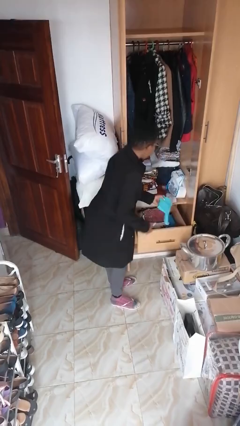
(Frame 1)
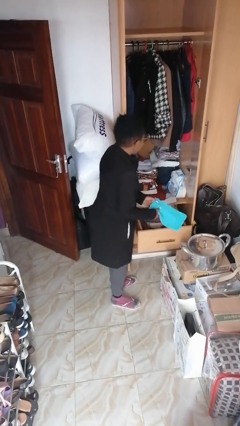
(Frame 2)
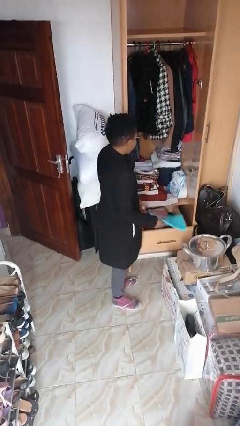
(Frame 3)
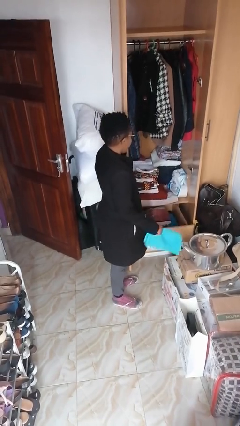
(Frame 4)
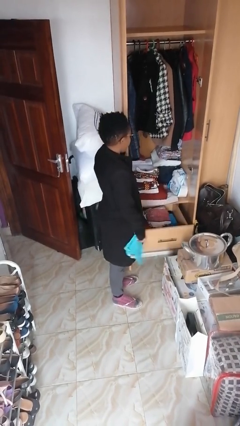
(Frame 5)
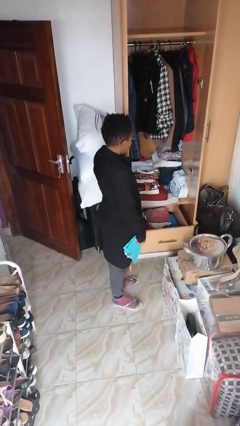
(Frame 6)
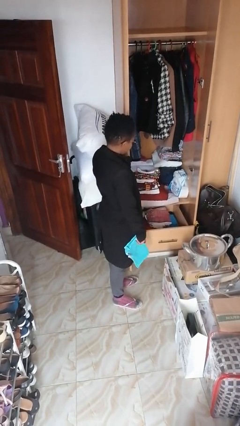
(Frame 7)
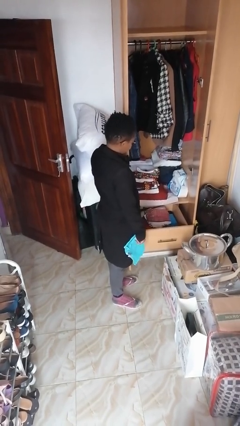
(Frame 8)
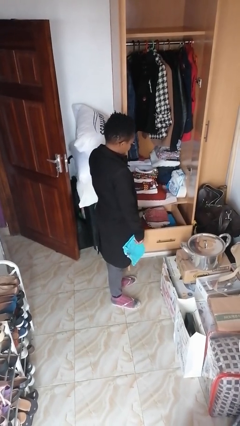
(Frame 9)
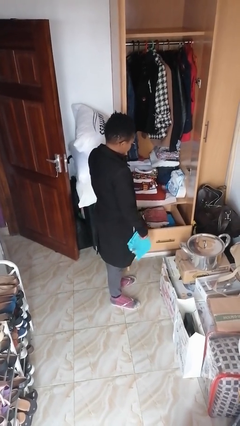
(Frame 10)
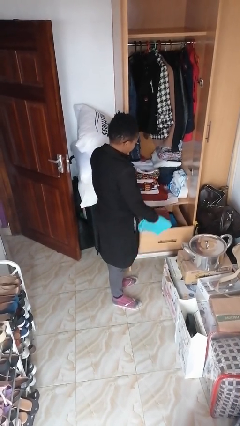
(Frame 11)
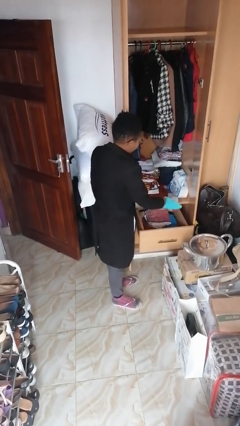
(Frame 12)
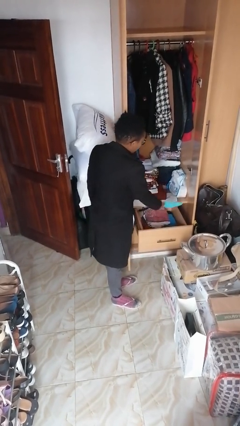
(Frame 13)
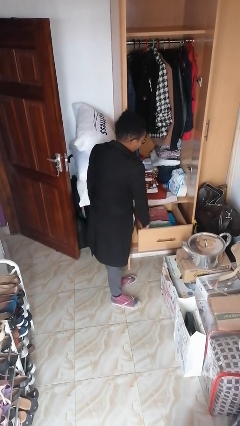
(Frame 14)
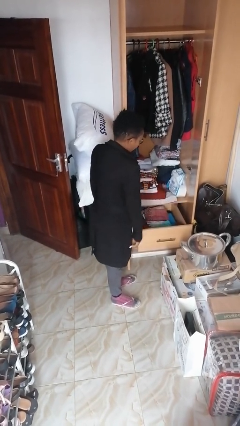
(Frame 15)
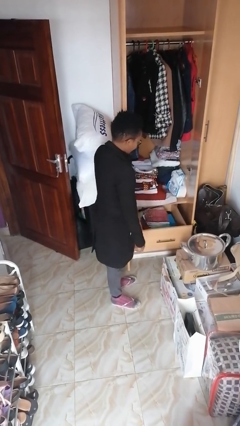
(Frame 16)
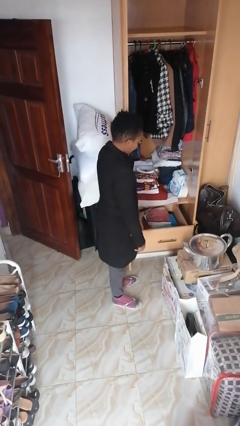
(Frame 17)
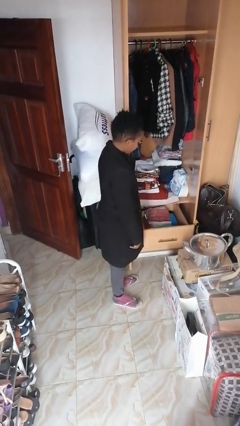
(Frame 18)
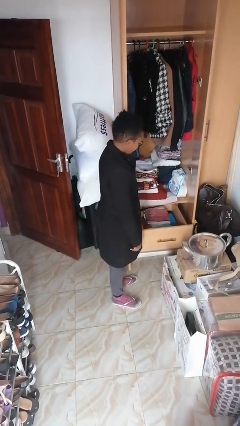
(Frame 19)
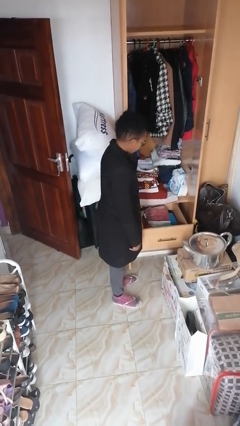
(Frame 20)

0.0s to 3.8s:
person pets cat

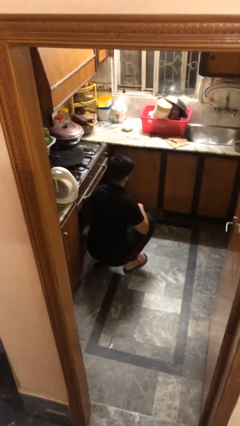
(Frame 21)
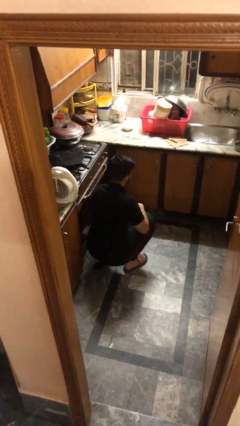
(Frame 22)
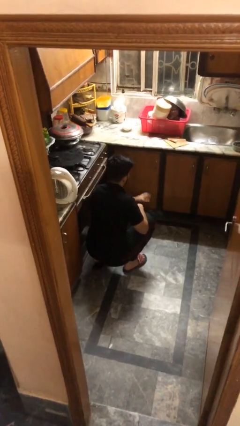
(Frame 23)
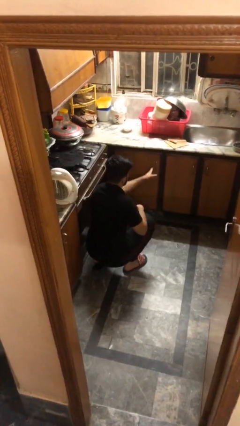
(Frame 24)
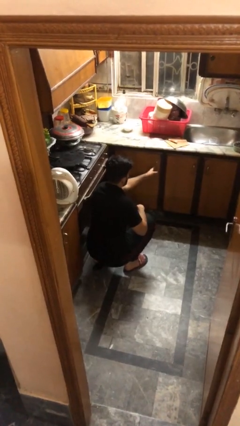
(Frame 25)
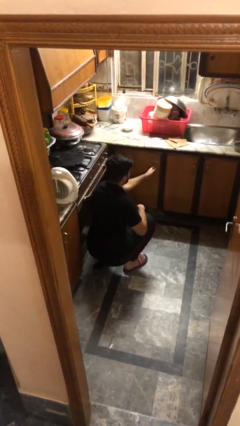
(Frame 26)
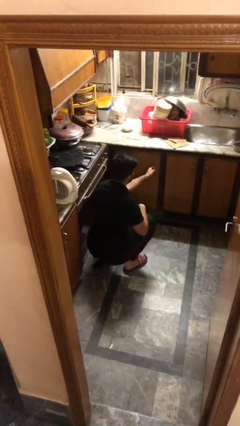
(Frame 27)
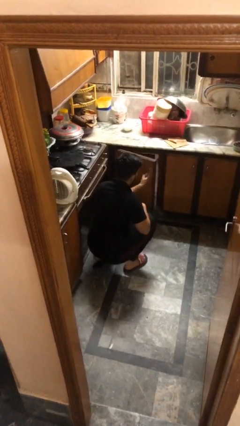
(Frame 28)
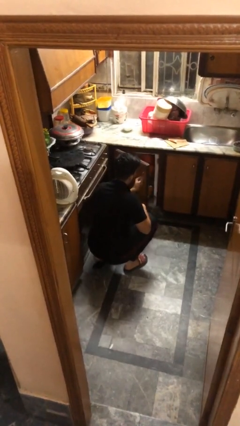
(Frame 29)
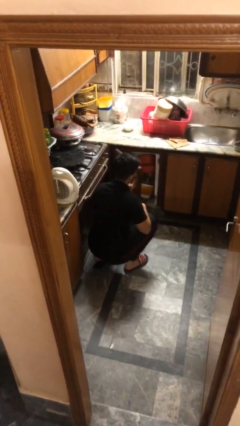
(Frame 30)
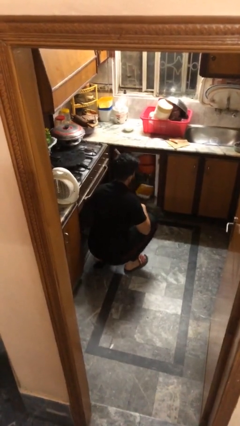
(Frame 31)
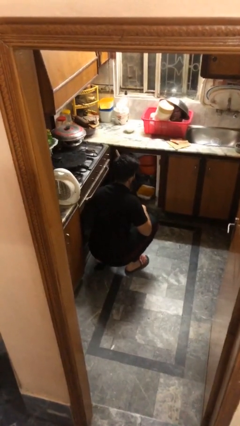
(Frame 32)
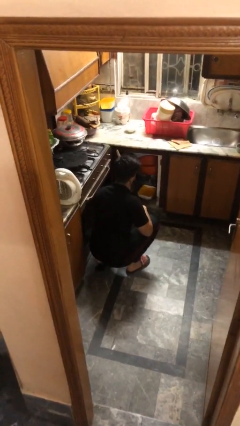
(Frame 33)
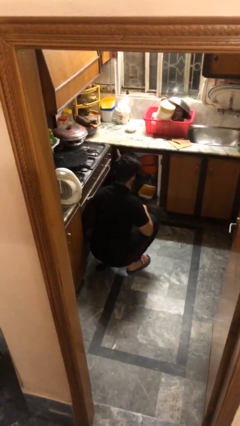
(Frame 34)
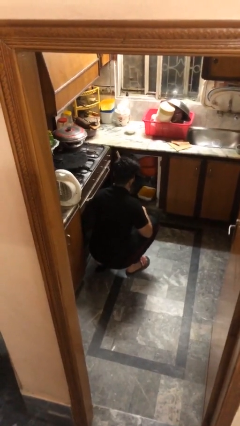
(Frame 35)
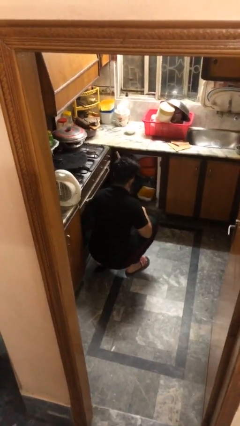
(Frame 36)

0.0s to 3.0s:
person opens kitchen drawer

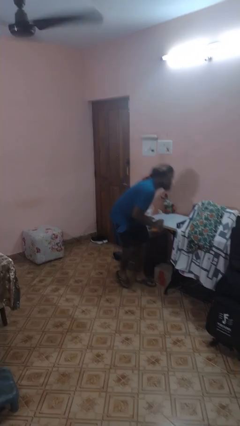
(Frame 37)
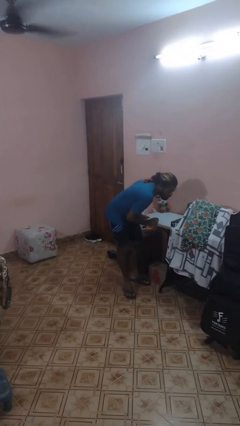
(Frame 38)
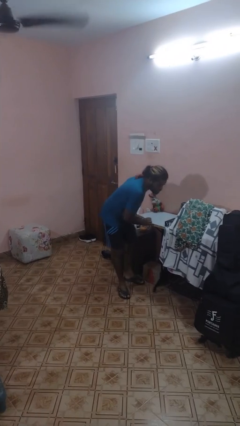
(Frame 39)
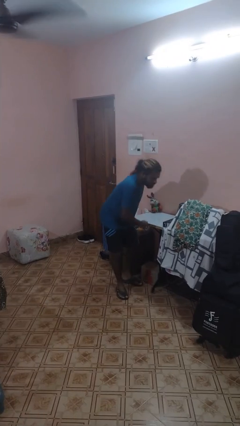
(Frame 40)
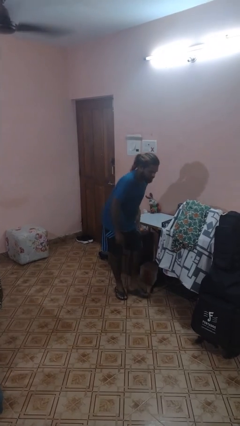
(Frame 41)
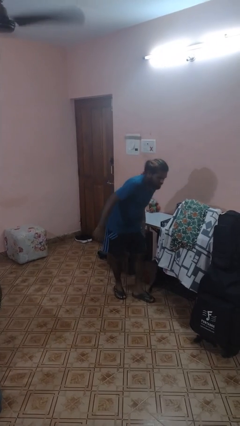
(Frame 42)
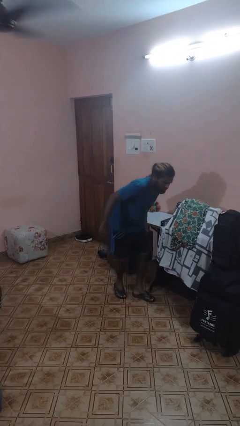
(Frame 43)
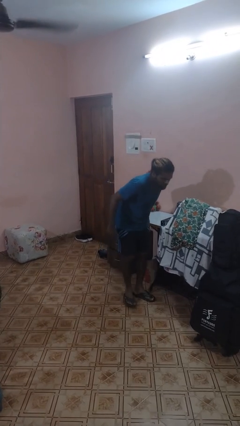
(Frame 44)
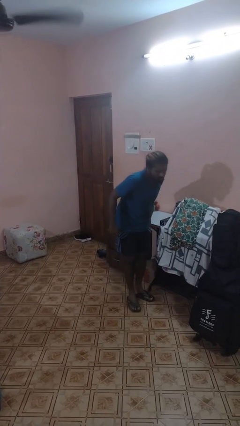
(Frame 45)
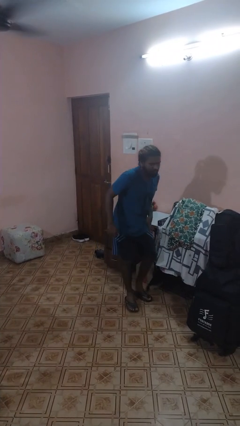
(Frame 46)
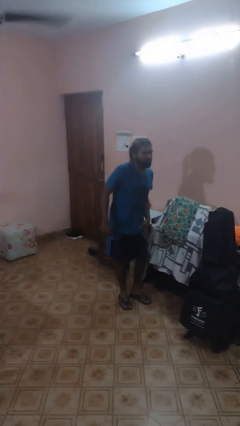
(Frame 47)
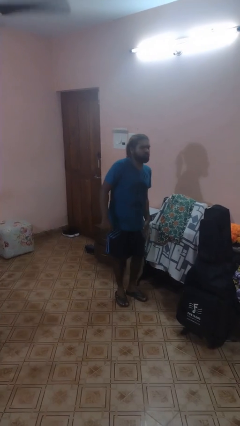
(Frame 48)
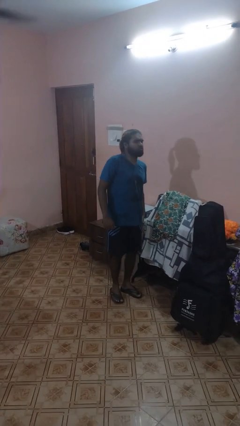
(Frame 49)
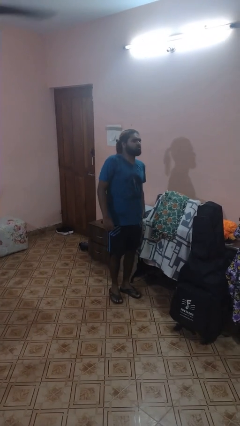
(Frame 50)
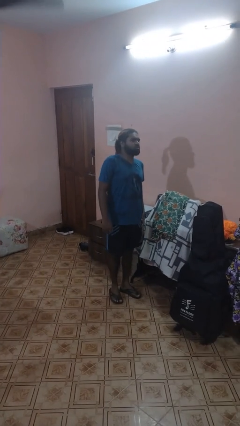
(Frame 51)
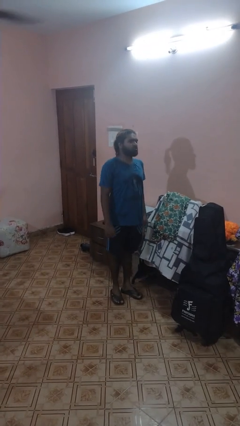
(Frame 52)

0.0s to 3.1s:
person bumps into table

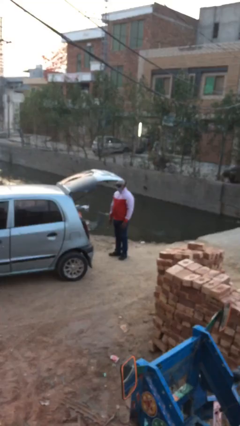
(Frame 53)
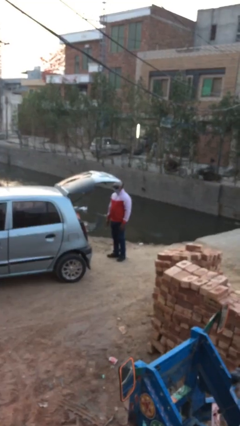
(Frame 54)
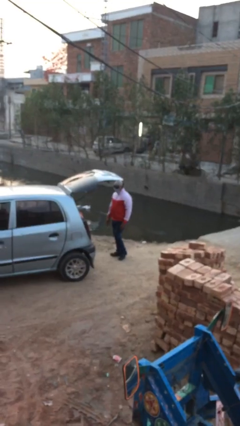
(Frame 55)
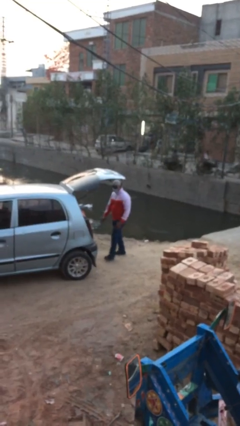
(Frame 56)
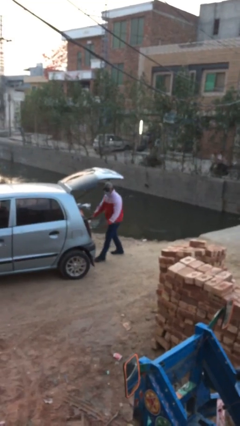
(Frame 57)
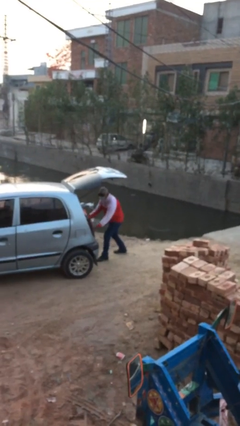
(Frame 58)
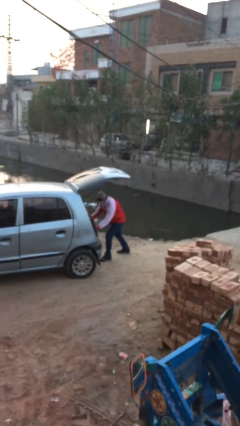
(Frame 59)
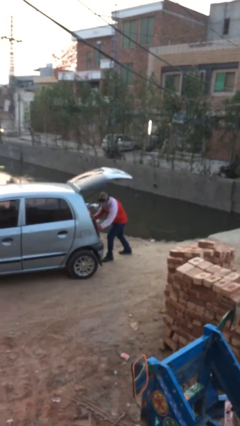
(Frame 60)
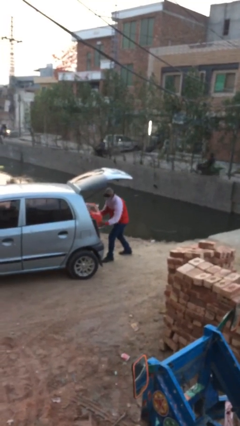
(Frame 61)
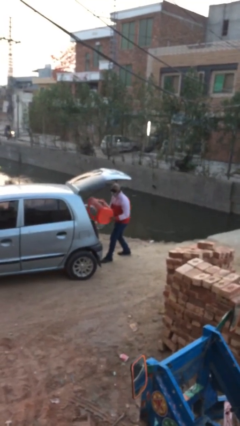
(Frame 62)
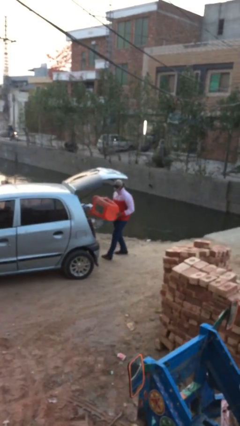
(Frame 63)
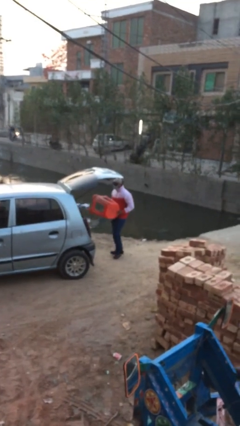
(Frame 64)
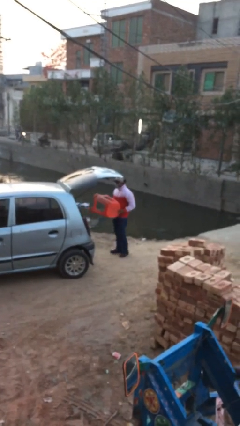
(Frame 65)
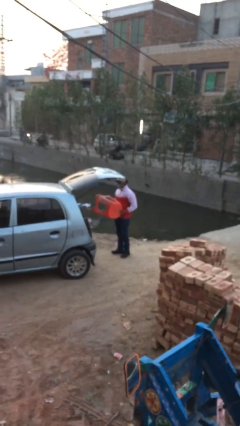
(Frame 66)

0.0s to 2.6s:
person unloads car

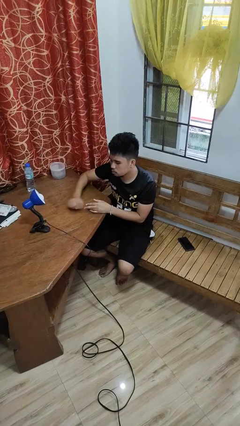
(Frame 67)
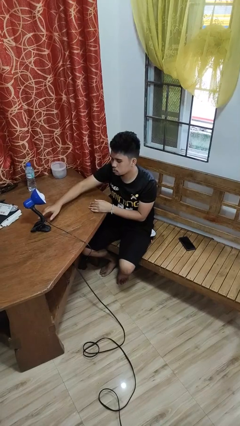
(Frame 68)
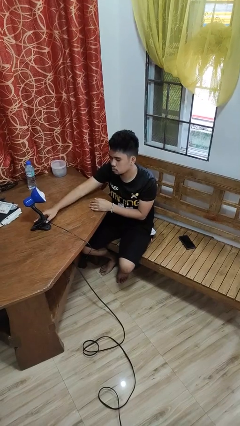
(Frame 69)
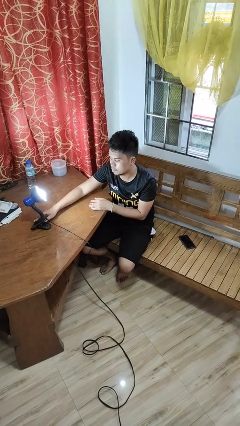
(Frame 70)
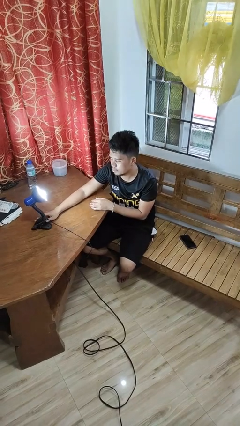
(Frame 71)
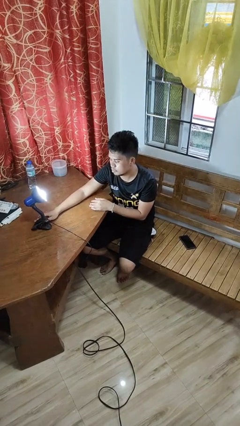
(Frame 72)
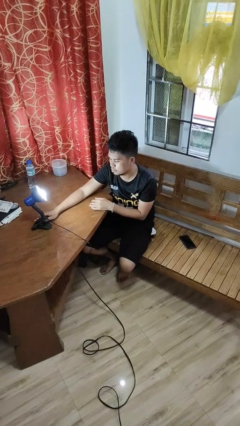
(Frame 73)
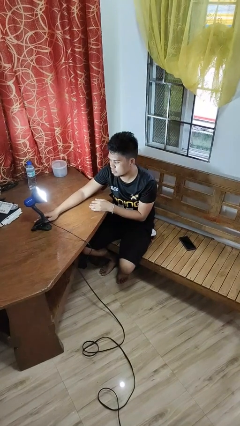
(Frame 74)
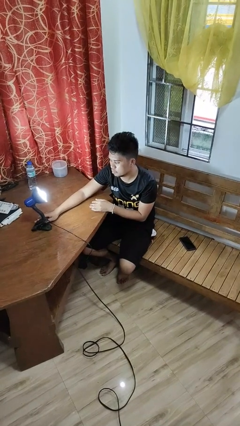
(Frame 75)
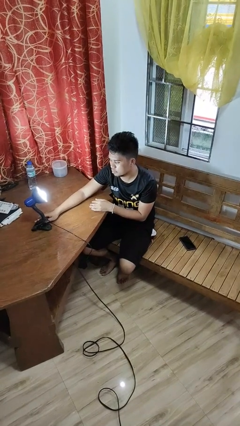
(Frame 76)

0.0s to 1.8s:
person turns on lamp

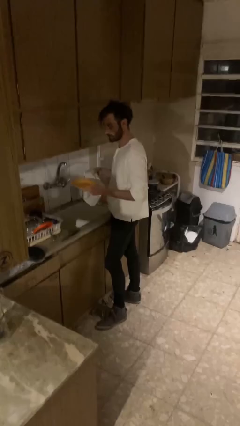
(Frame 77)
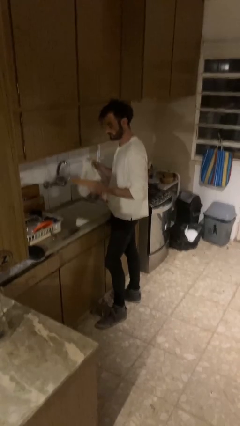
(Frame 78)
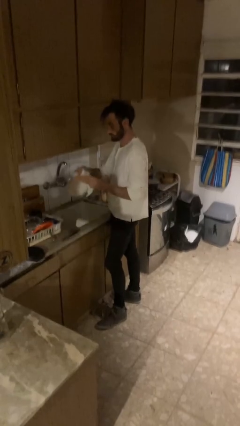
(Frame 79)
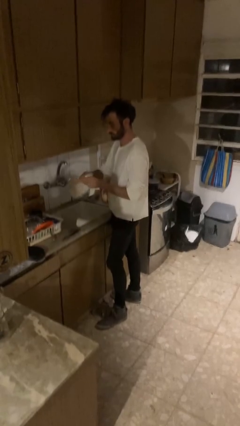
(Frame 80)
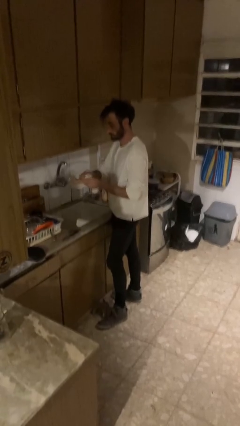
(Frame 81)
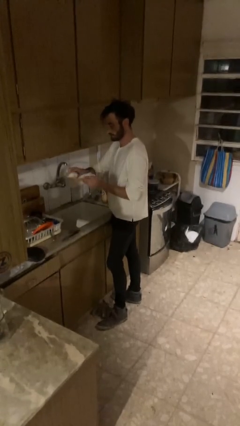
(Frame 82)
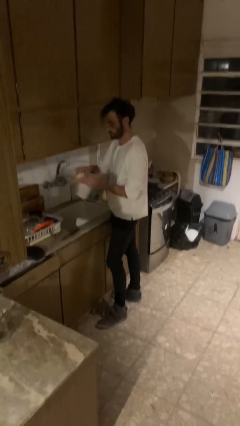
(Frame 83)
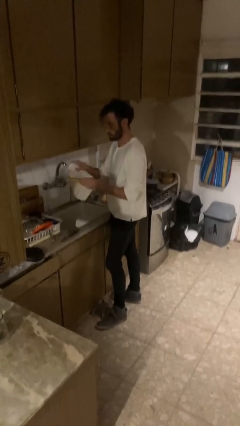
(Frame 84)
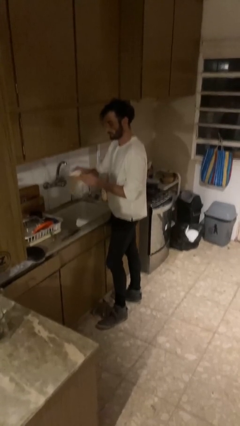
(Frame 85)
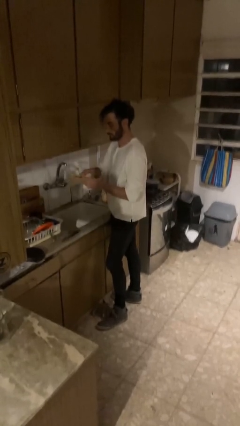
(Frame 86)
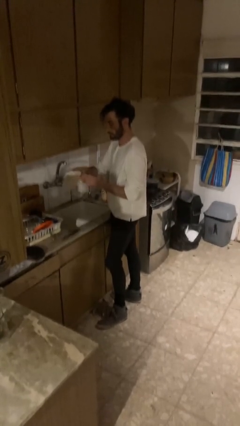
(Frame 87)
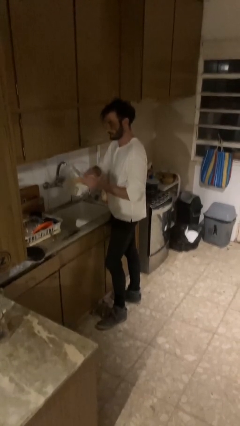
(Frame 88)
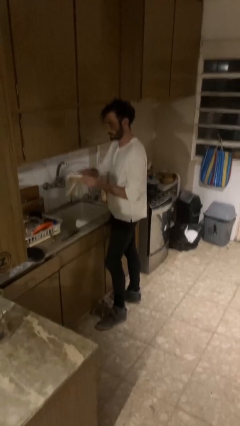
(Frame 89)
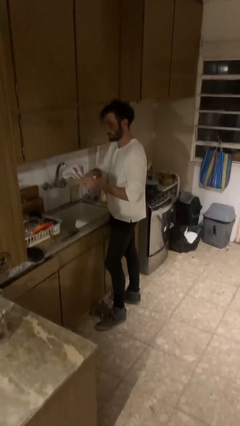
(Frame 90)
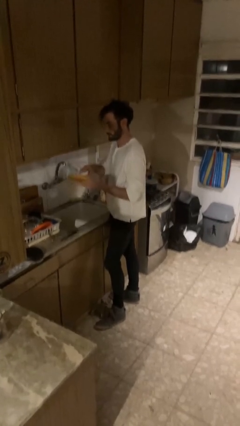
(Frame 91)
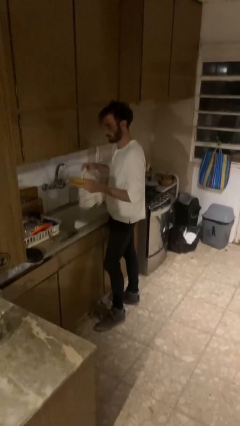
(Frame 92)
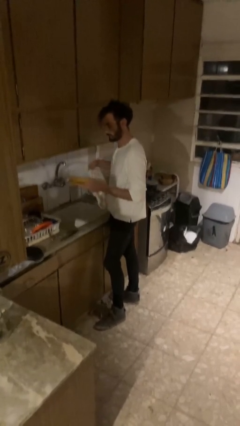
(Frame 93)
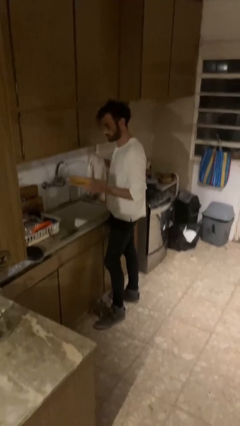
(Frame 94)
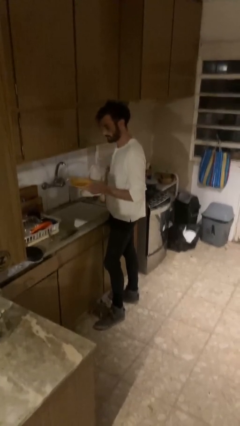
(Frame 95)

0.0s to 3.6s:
person dries dish
